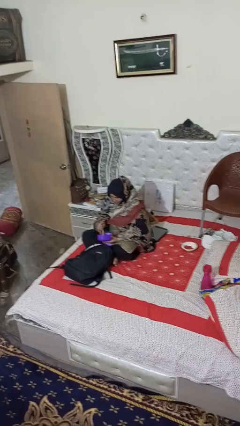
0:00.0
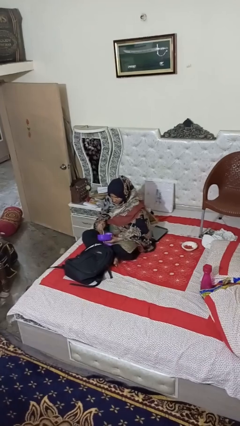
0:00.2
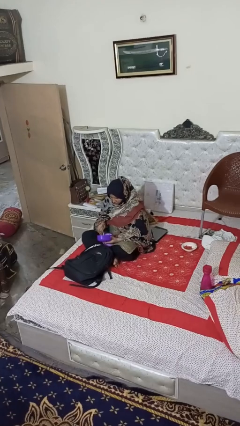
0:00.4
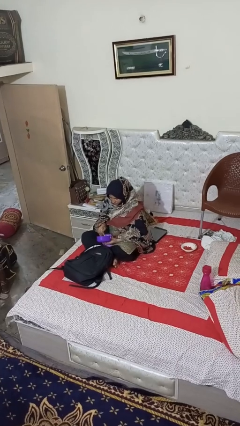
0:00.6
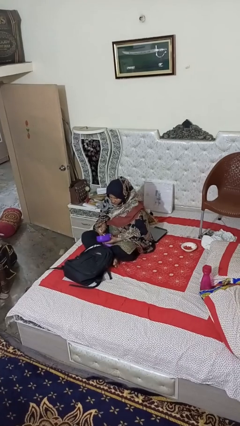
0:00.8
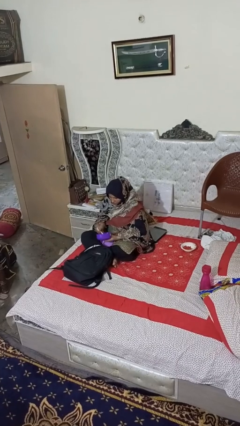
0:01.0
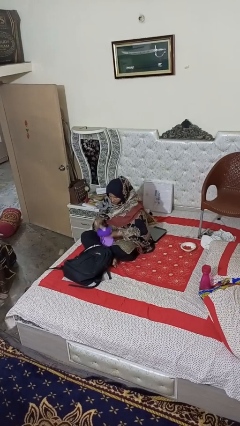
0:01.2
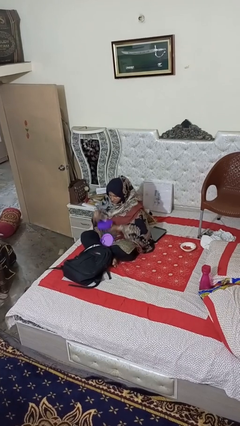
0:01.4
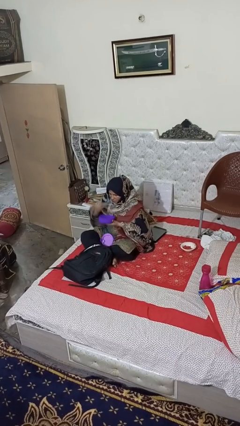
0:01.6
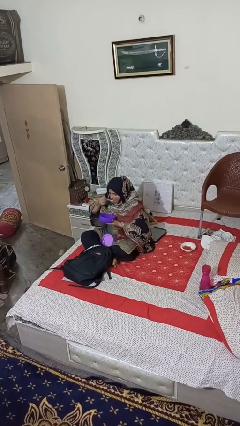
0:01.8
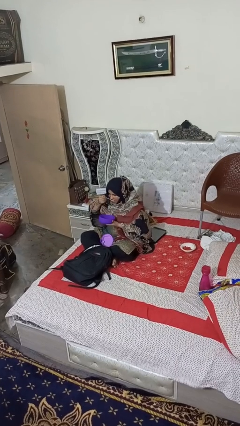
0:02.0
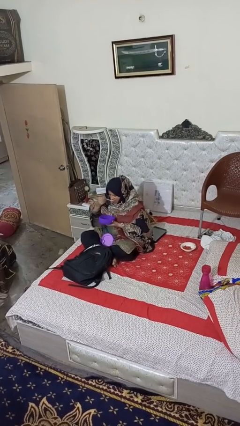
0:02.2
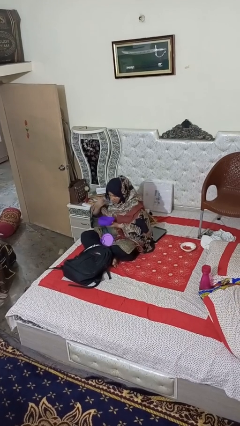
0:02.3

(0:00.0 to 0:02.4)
person eats snack from bag

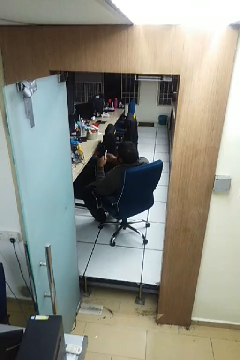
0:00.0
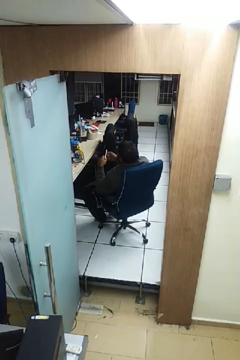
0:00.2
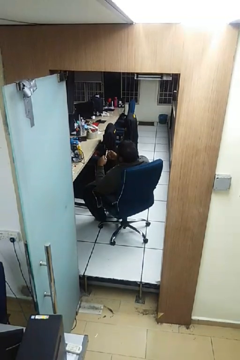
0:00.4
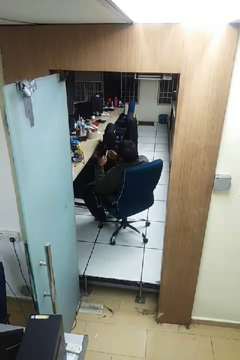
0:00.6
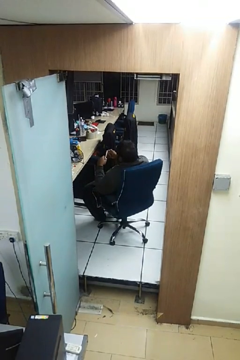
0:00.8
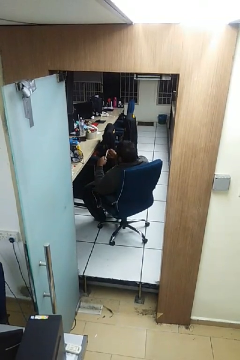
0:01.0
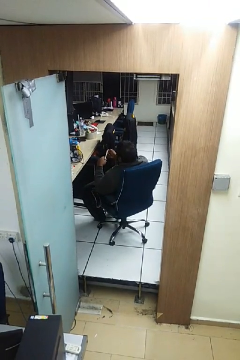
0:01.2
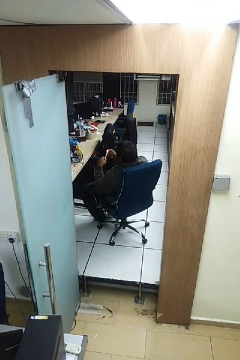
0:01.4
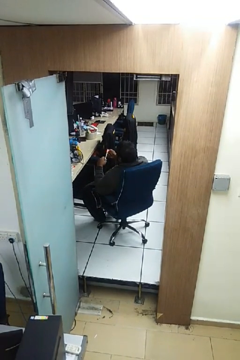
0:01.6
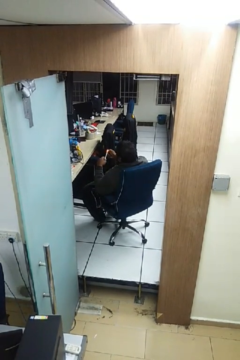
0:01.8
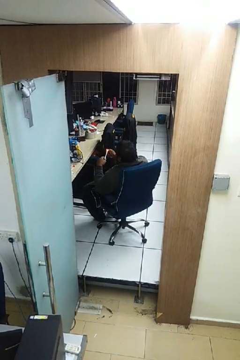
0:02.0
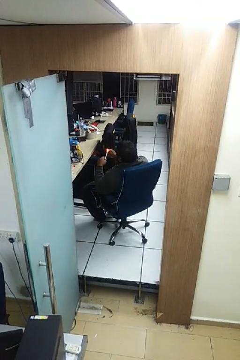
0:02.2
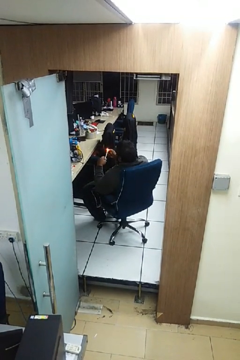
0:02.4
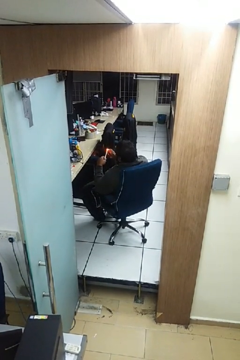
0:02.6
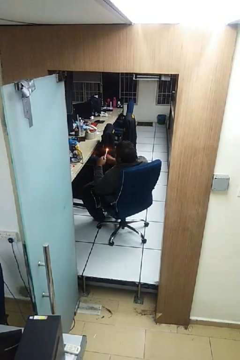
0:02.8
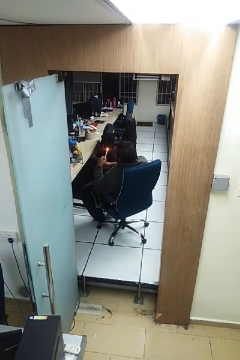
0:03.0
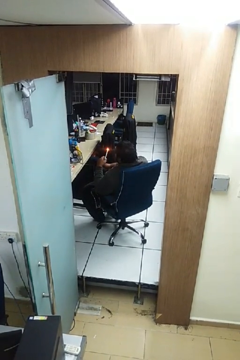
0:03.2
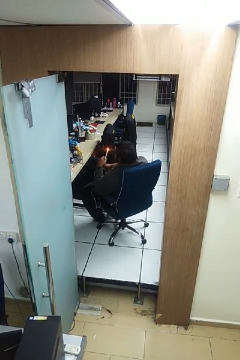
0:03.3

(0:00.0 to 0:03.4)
person lights candle

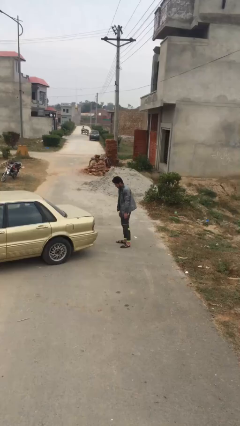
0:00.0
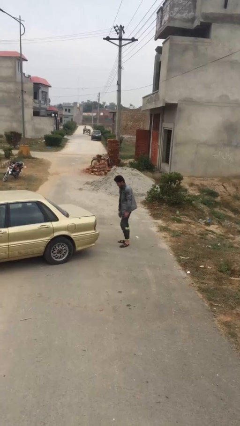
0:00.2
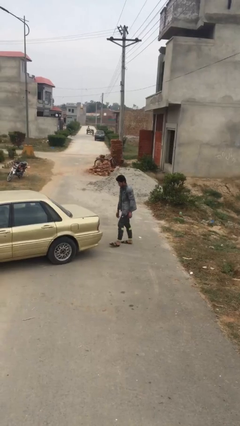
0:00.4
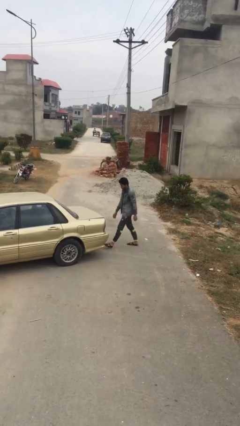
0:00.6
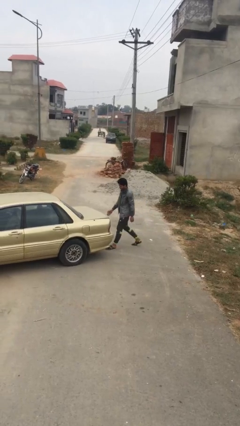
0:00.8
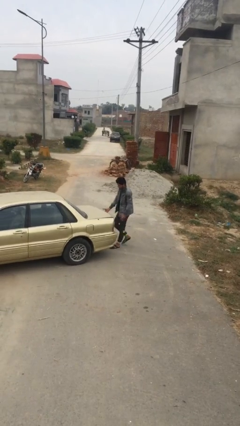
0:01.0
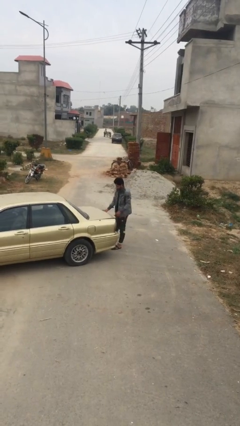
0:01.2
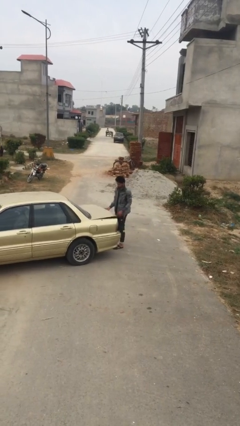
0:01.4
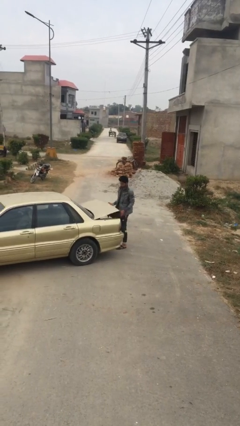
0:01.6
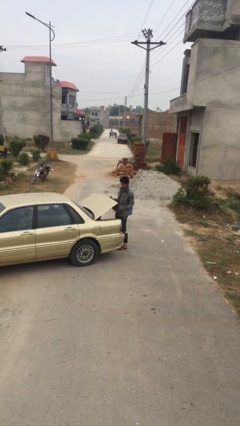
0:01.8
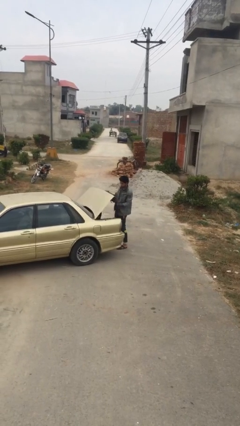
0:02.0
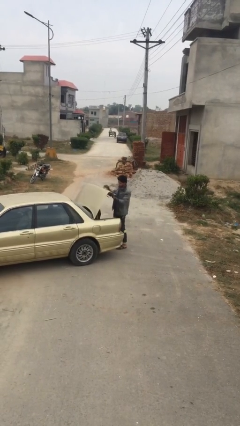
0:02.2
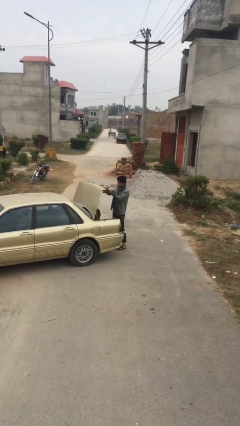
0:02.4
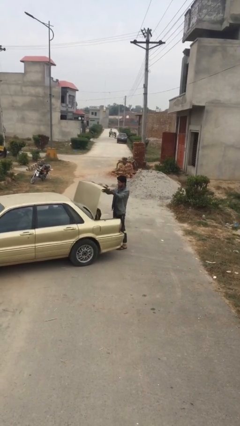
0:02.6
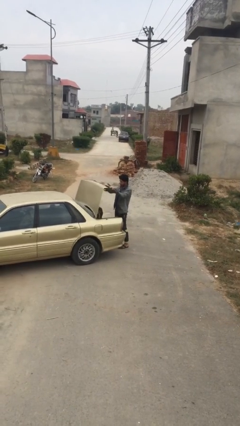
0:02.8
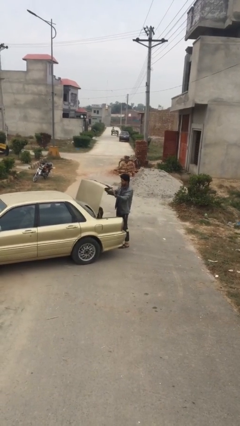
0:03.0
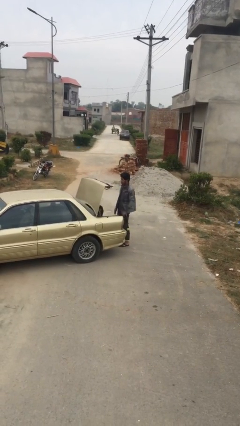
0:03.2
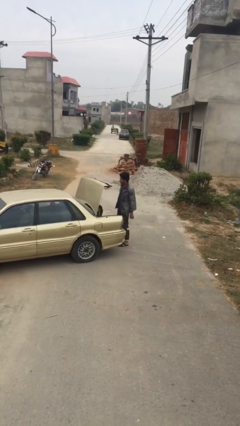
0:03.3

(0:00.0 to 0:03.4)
person opens car trunk

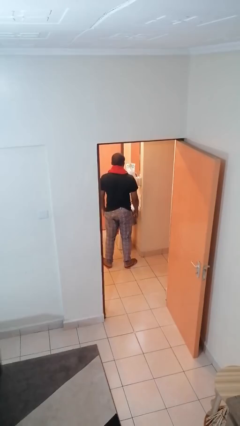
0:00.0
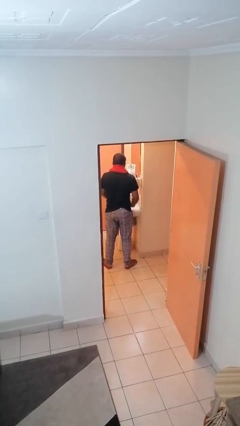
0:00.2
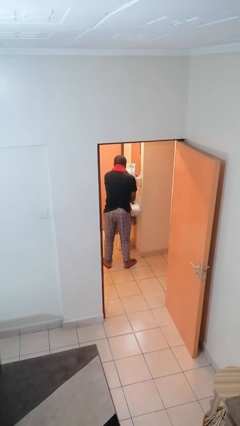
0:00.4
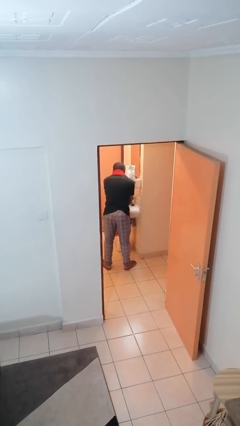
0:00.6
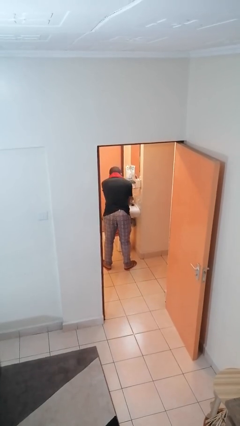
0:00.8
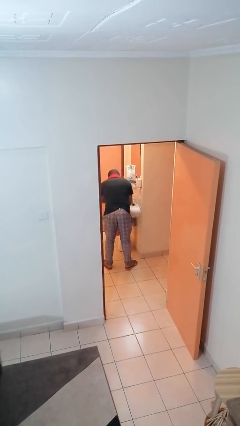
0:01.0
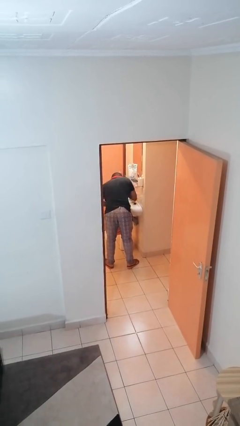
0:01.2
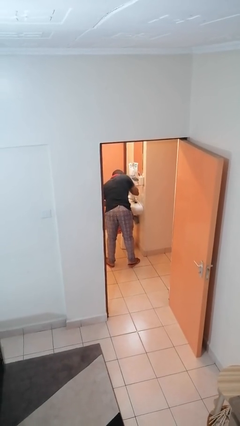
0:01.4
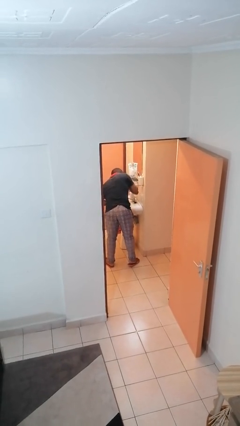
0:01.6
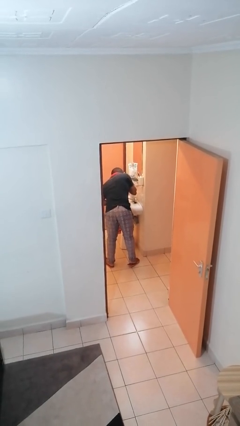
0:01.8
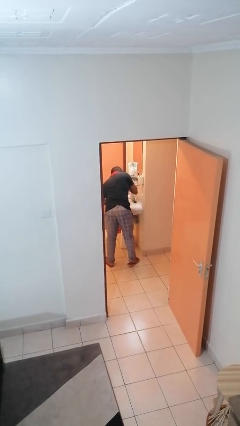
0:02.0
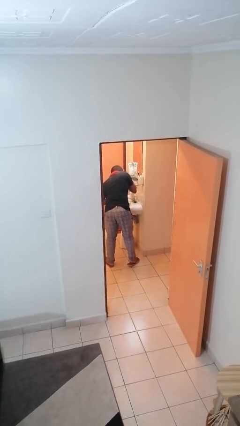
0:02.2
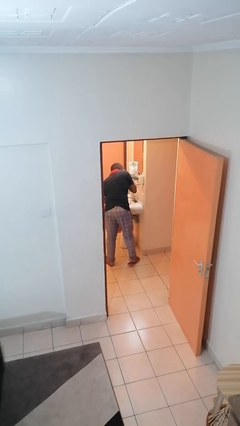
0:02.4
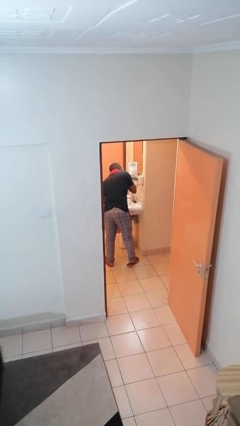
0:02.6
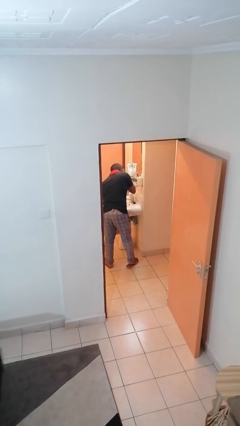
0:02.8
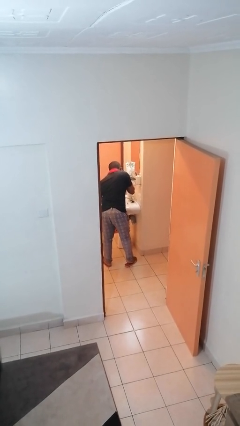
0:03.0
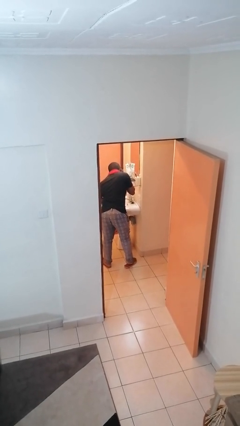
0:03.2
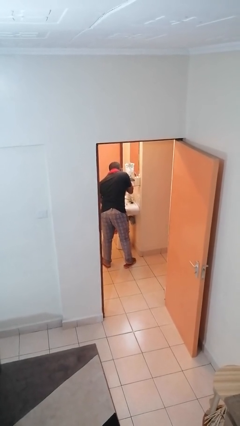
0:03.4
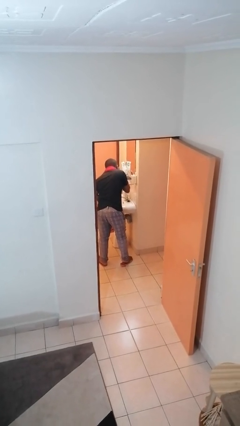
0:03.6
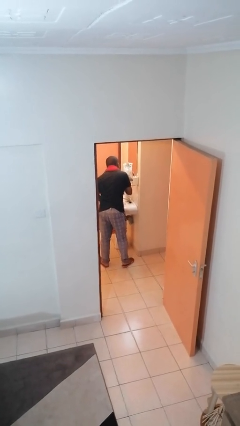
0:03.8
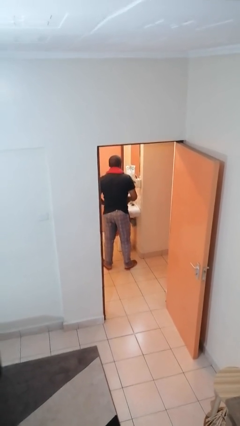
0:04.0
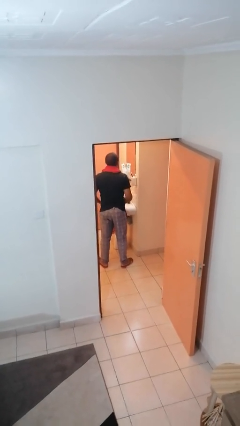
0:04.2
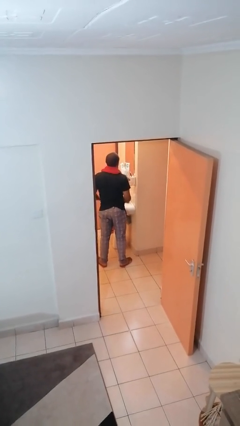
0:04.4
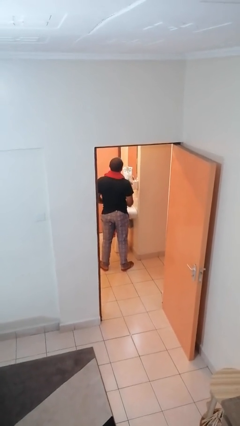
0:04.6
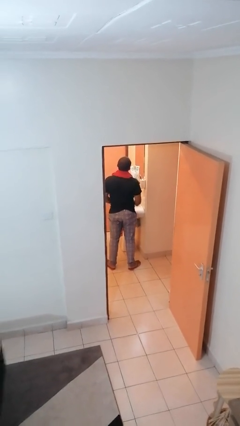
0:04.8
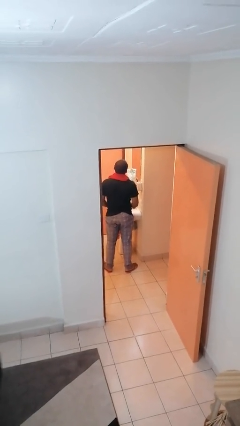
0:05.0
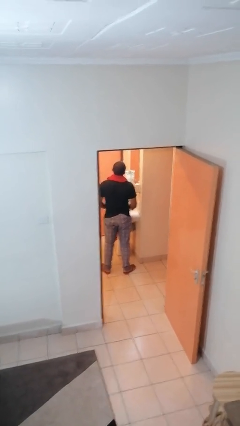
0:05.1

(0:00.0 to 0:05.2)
person washes face

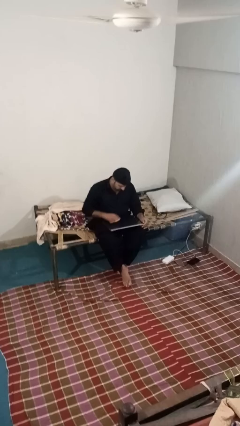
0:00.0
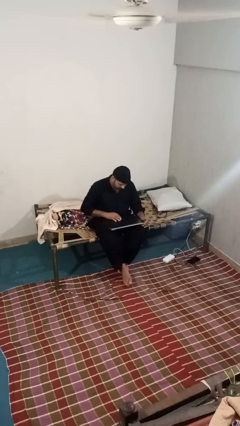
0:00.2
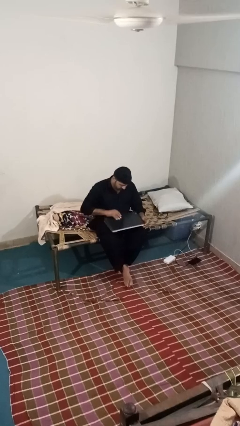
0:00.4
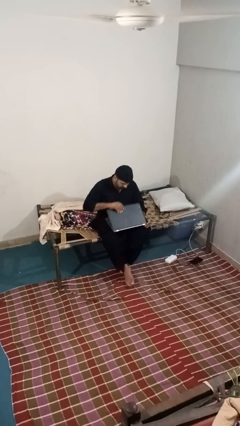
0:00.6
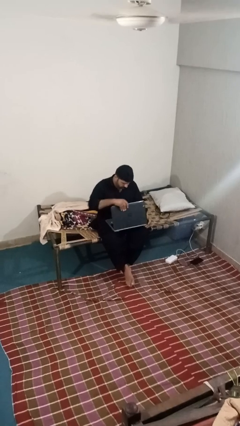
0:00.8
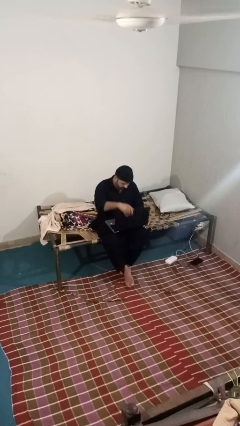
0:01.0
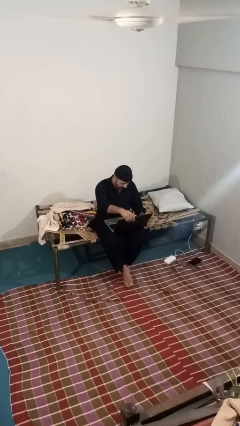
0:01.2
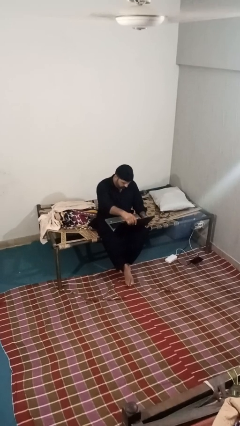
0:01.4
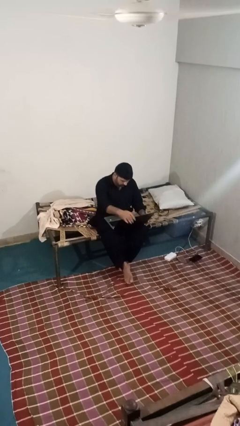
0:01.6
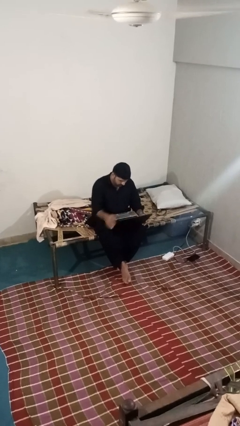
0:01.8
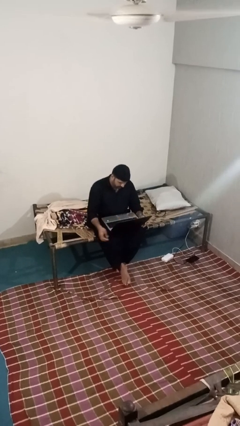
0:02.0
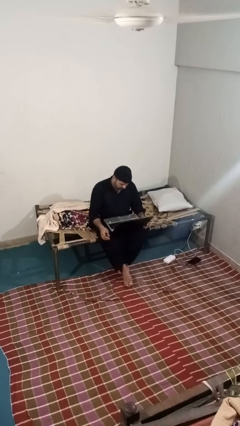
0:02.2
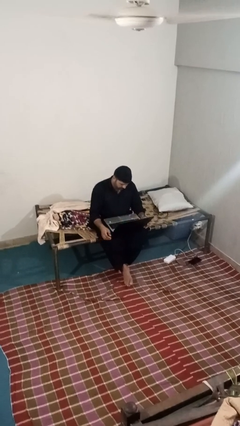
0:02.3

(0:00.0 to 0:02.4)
person opens laptop

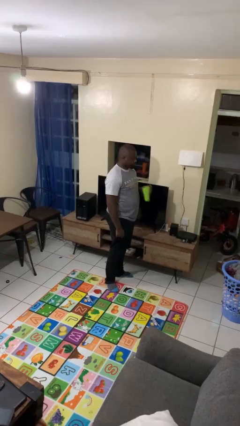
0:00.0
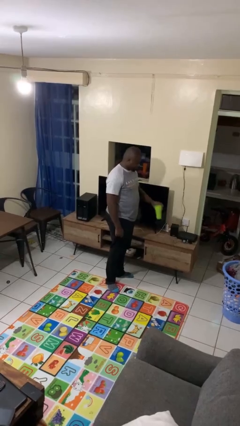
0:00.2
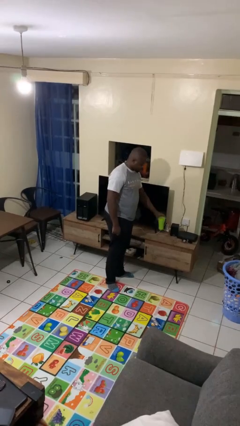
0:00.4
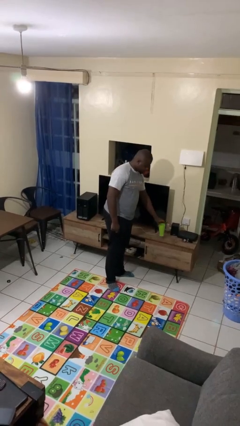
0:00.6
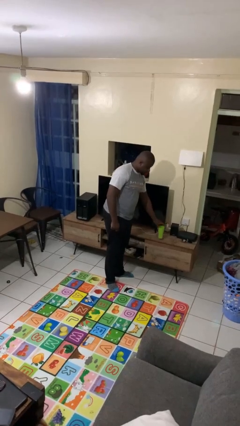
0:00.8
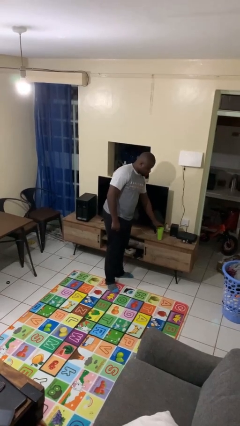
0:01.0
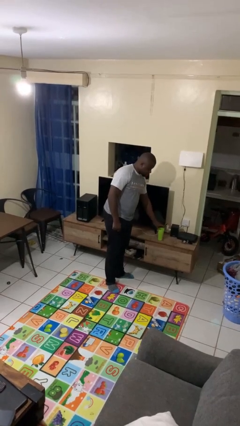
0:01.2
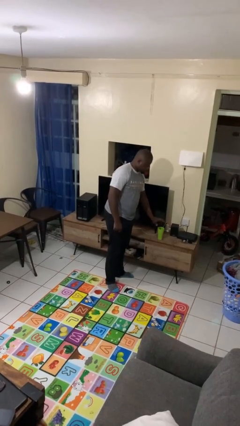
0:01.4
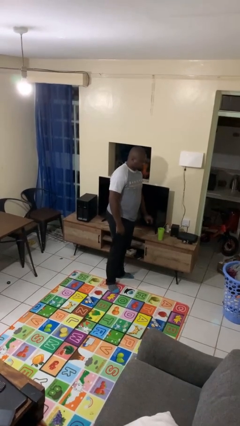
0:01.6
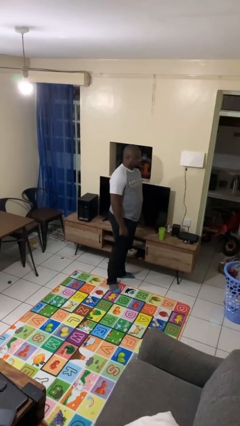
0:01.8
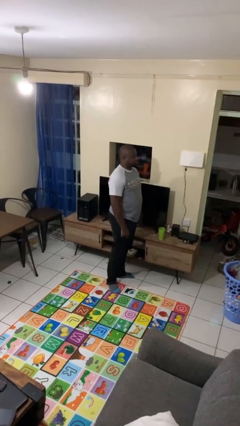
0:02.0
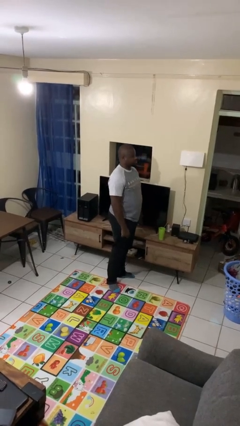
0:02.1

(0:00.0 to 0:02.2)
person puts down object on countertop
